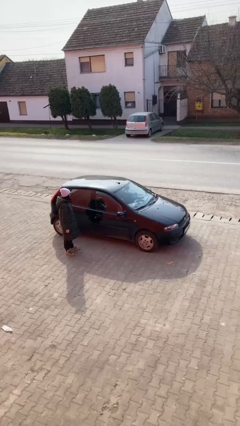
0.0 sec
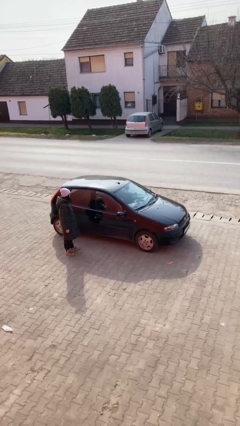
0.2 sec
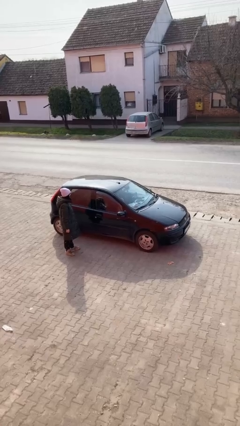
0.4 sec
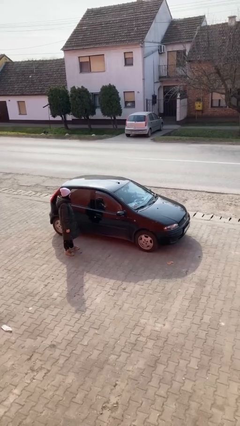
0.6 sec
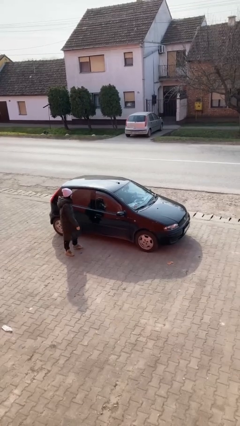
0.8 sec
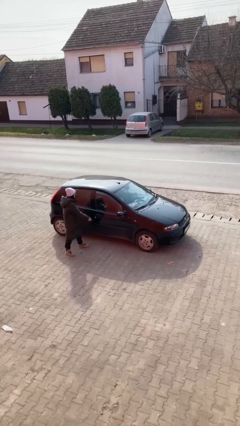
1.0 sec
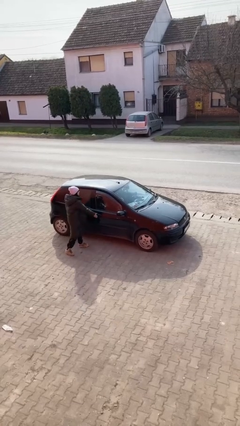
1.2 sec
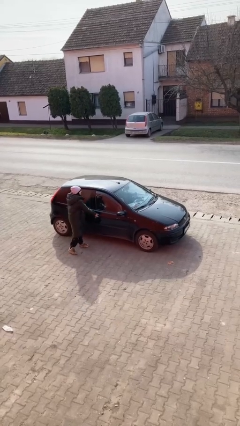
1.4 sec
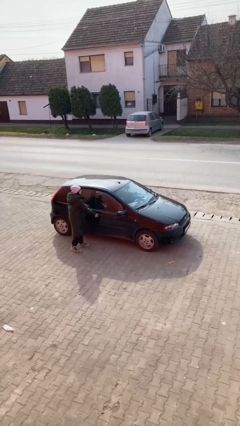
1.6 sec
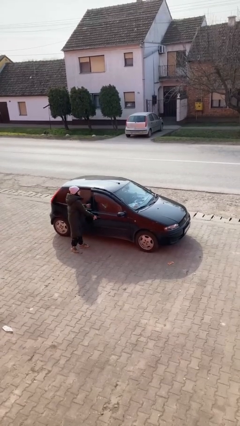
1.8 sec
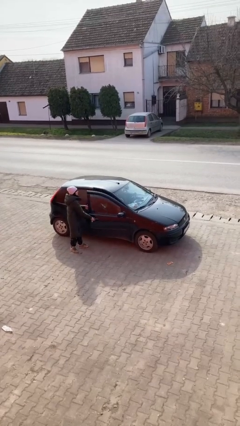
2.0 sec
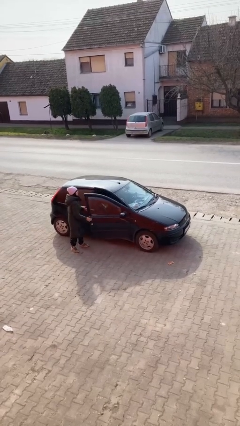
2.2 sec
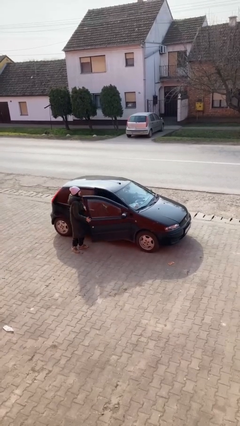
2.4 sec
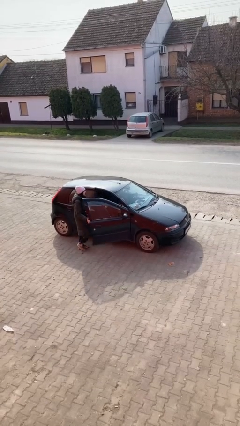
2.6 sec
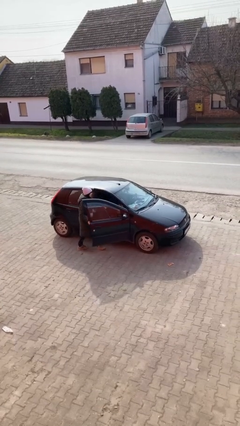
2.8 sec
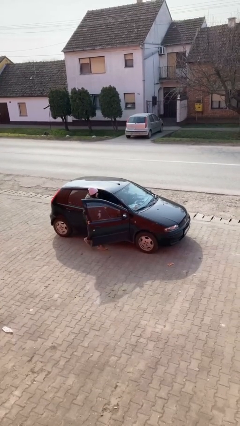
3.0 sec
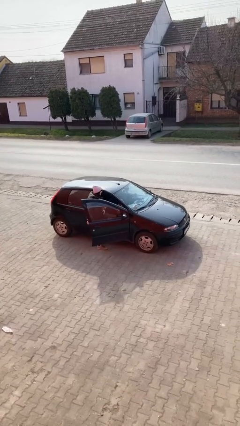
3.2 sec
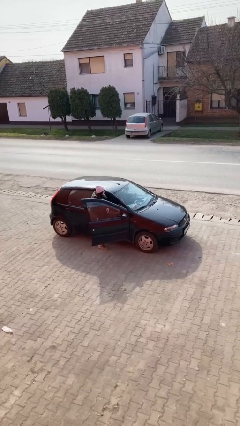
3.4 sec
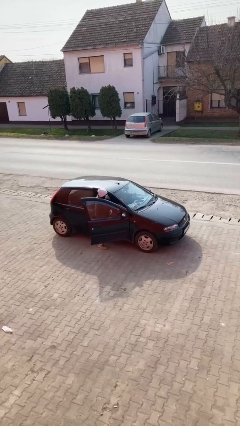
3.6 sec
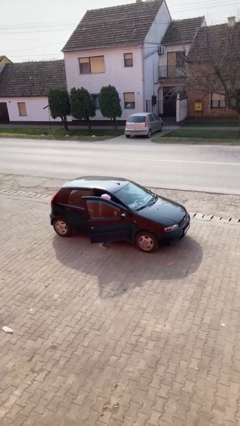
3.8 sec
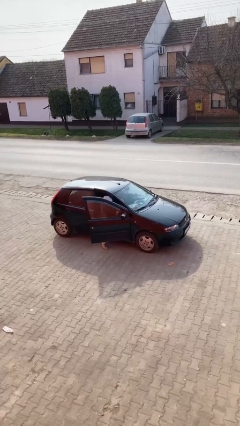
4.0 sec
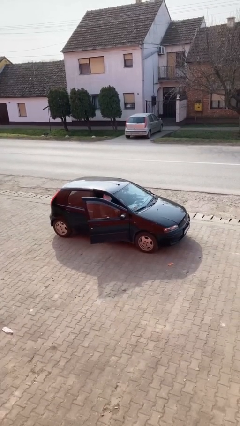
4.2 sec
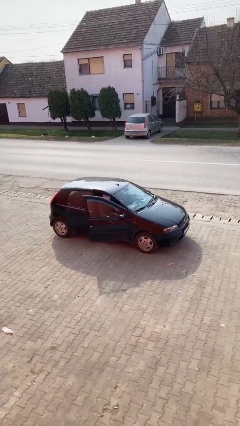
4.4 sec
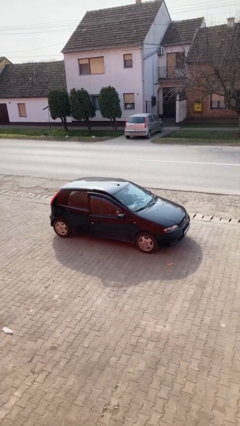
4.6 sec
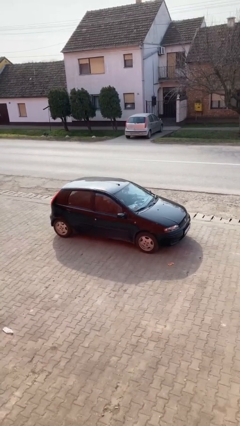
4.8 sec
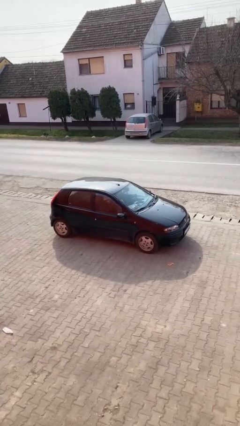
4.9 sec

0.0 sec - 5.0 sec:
car picks up person

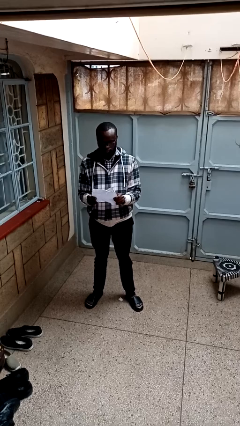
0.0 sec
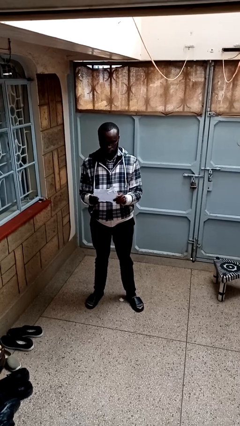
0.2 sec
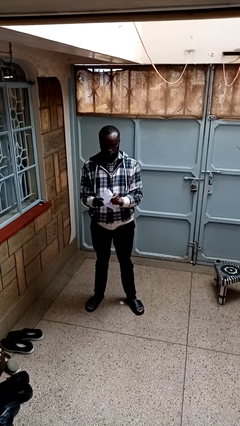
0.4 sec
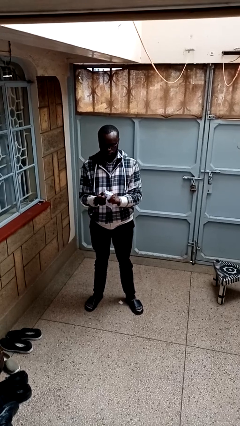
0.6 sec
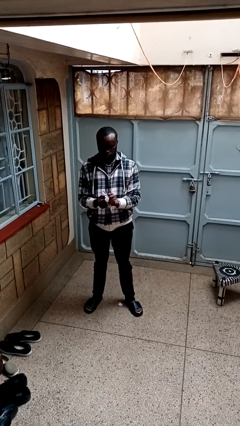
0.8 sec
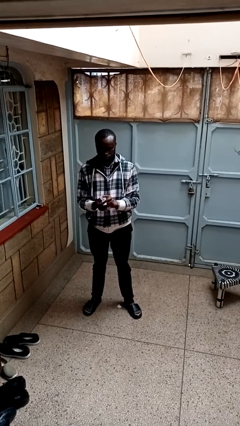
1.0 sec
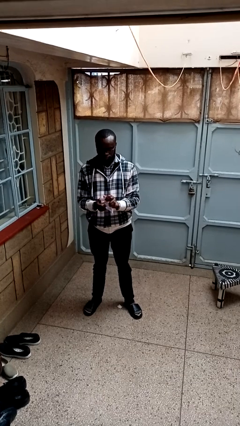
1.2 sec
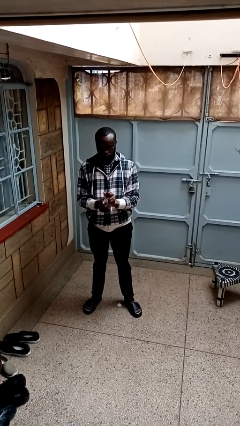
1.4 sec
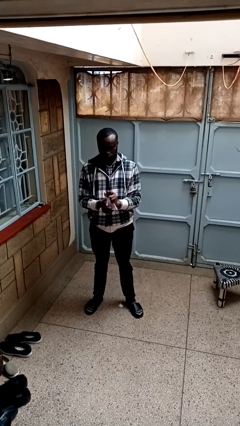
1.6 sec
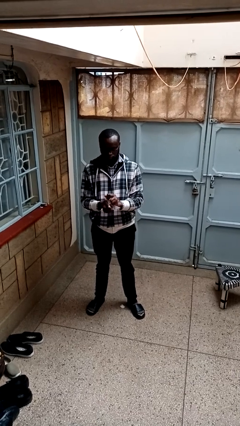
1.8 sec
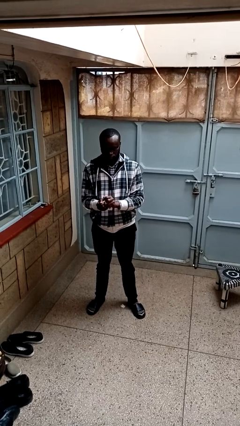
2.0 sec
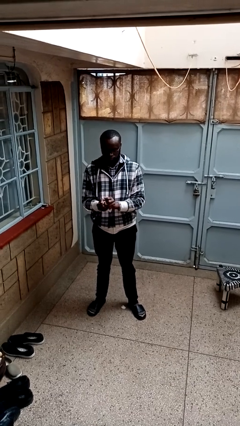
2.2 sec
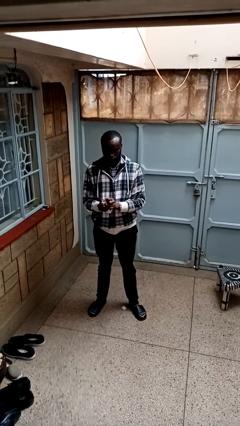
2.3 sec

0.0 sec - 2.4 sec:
person crumples paper

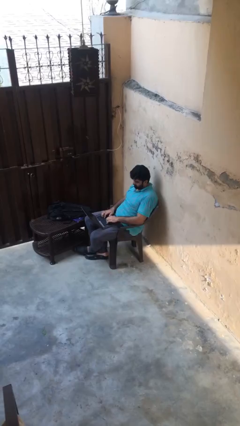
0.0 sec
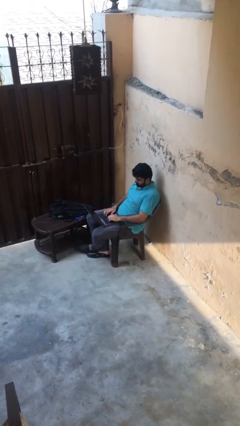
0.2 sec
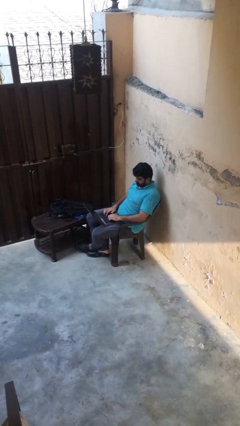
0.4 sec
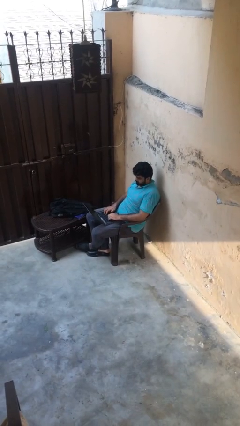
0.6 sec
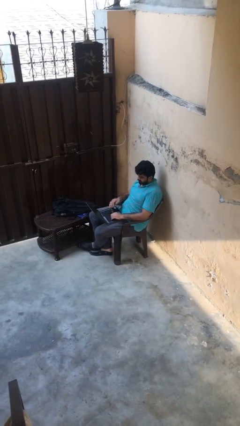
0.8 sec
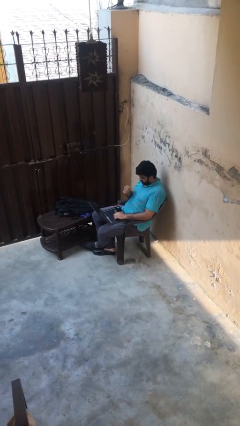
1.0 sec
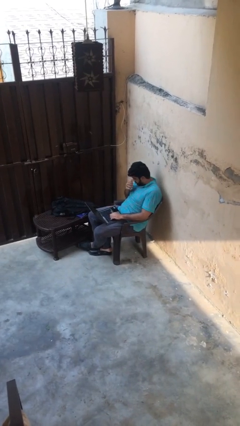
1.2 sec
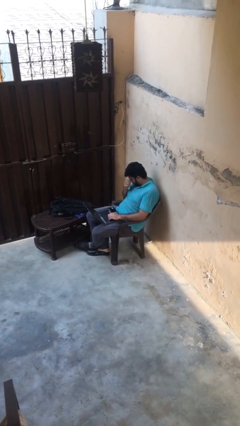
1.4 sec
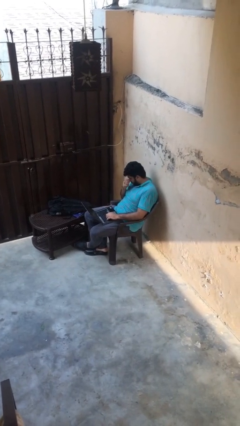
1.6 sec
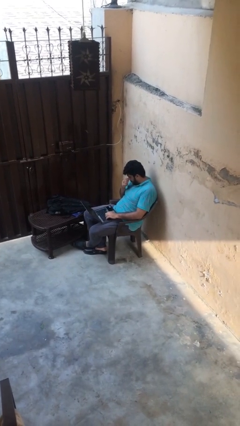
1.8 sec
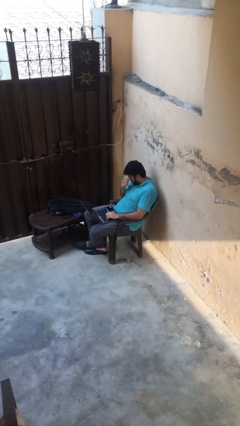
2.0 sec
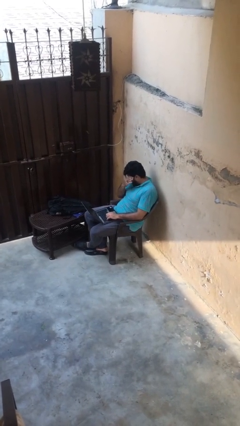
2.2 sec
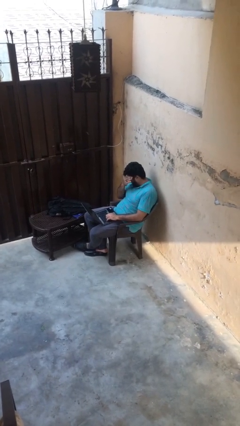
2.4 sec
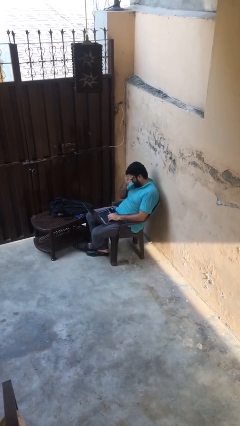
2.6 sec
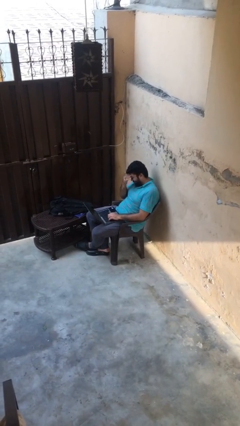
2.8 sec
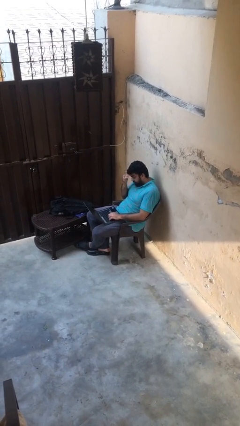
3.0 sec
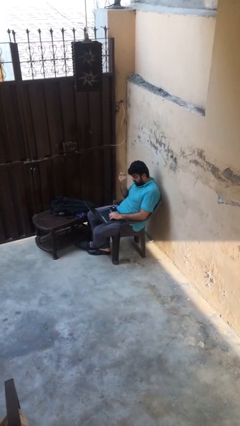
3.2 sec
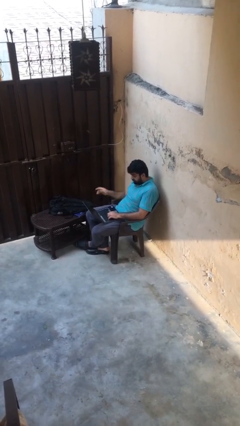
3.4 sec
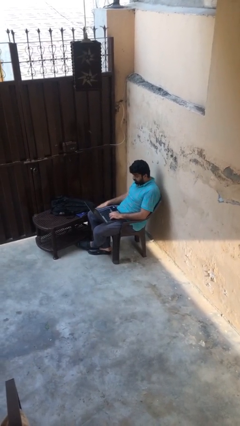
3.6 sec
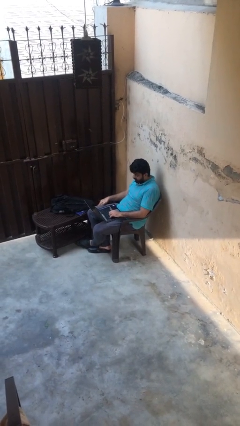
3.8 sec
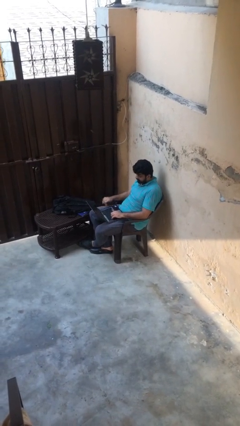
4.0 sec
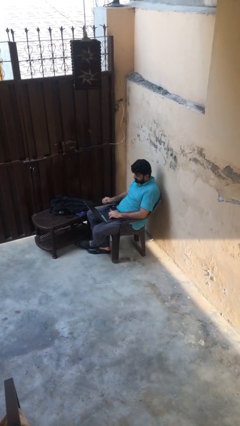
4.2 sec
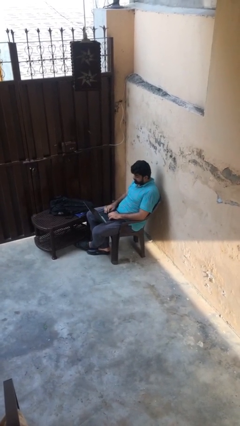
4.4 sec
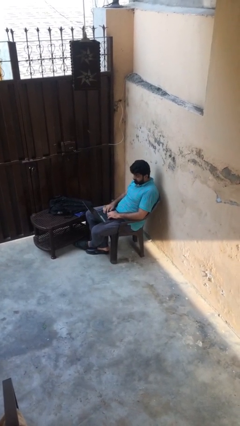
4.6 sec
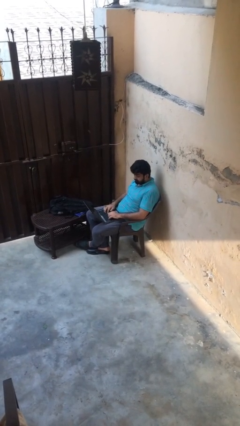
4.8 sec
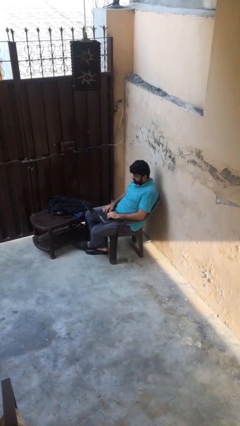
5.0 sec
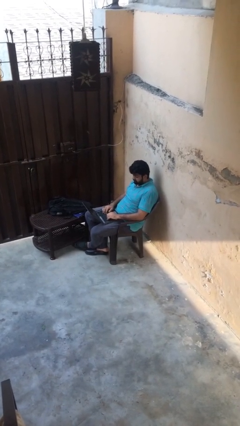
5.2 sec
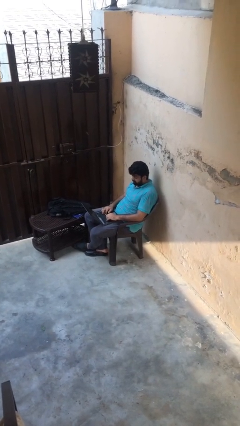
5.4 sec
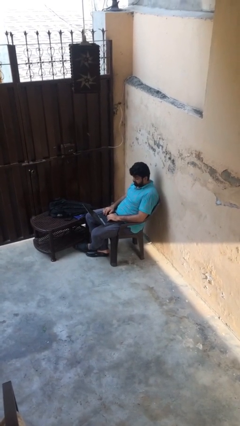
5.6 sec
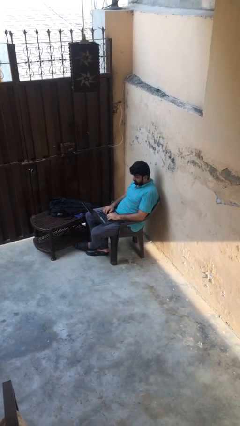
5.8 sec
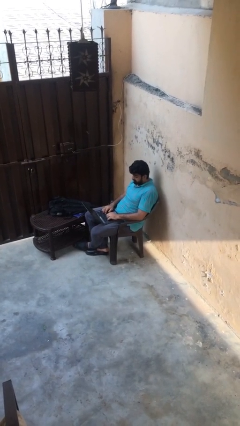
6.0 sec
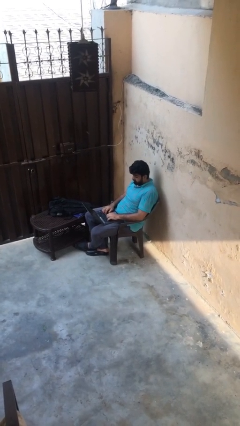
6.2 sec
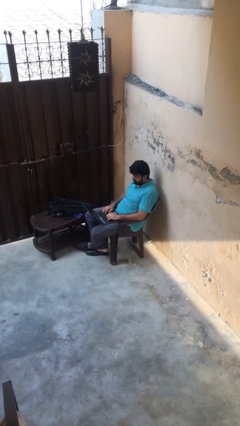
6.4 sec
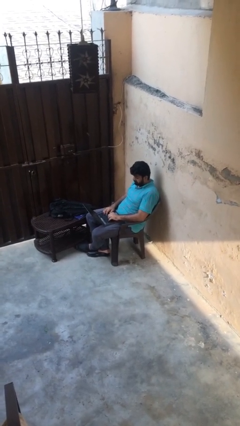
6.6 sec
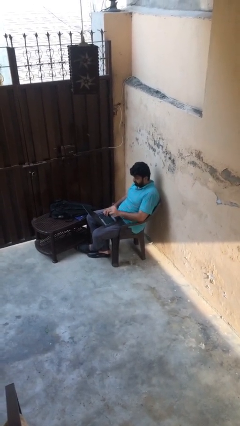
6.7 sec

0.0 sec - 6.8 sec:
person interacts with laptop

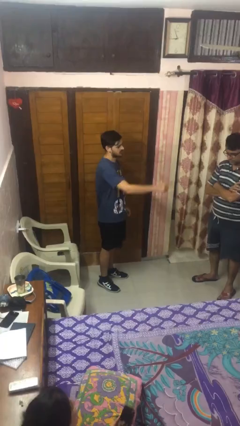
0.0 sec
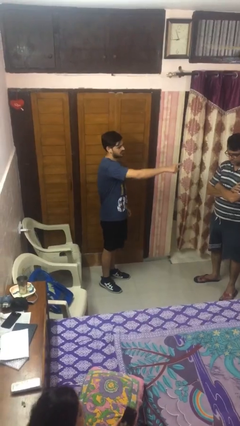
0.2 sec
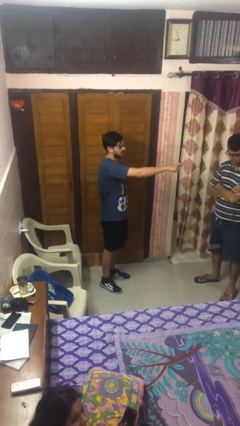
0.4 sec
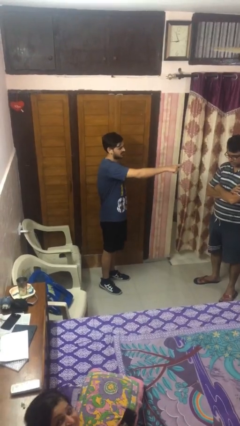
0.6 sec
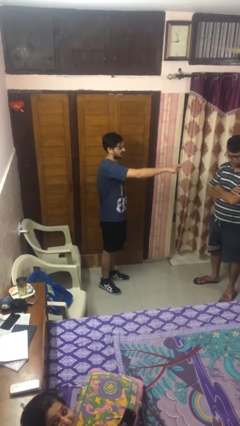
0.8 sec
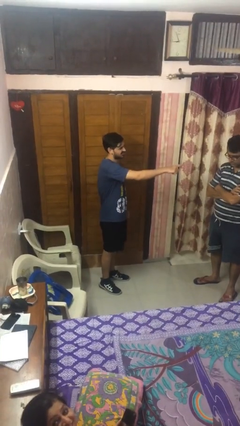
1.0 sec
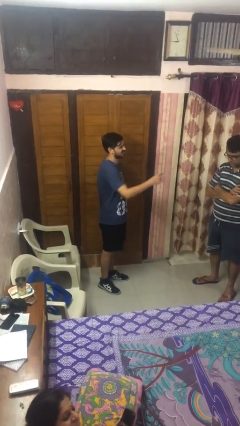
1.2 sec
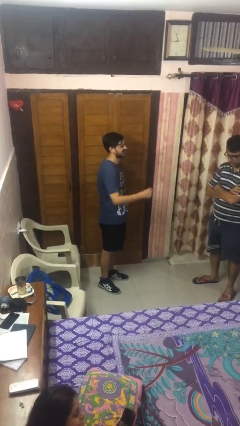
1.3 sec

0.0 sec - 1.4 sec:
person points at person

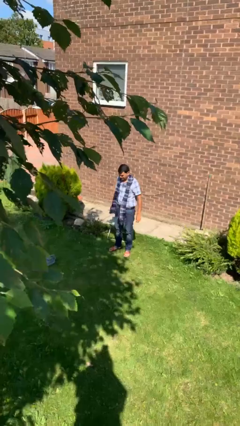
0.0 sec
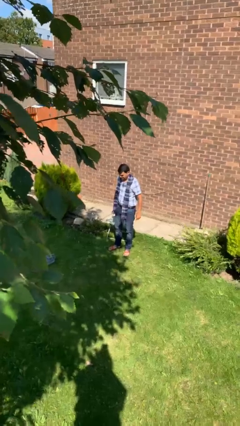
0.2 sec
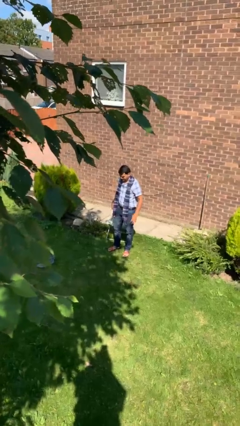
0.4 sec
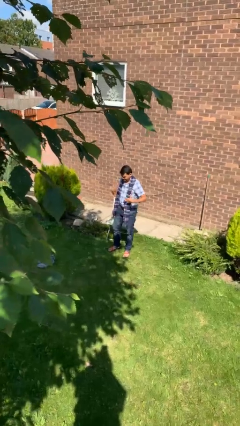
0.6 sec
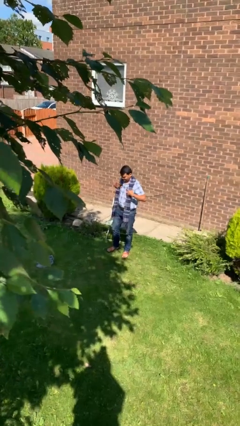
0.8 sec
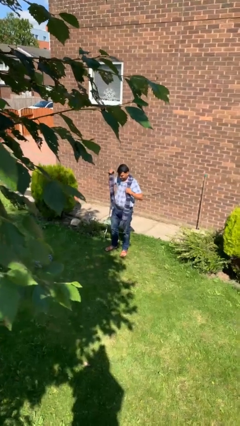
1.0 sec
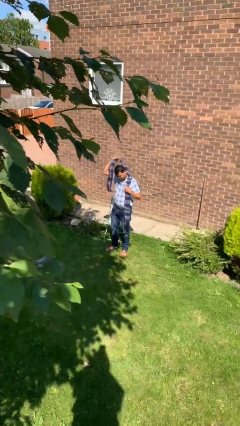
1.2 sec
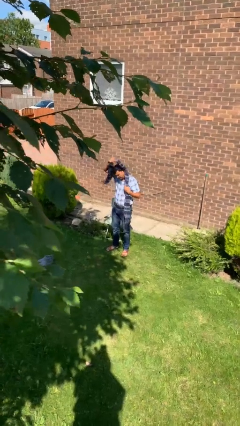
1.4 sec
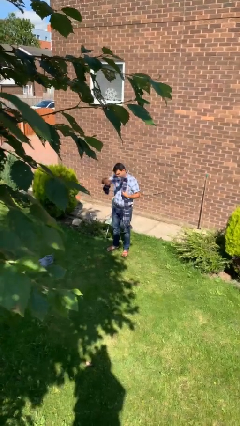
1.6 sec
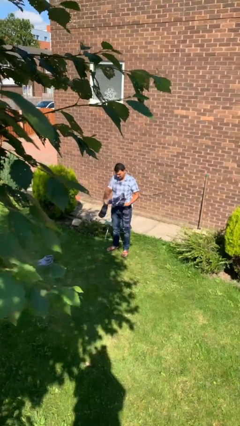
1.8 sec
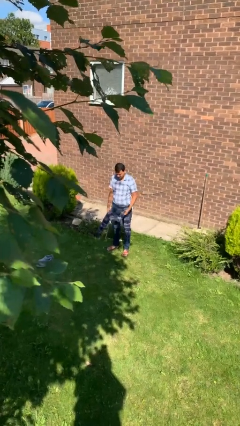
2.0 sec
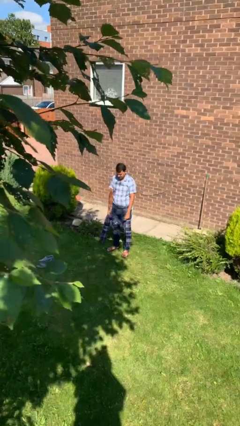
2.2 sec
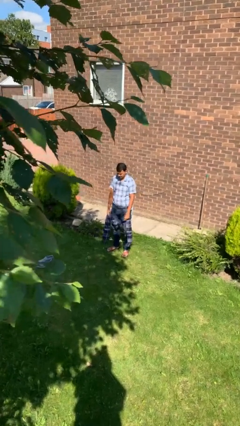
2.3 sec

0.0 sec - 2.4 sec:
person takes off scarf
